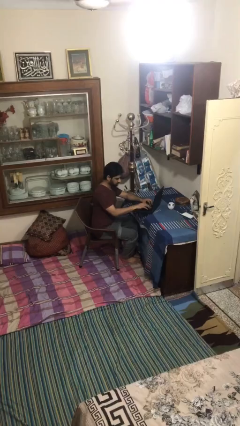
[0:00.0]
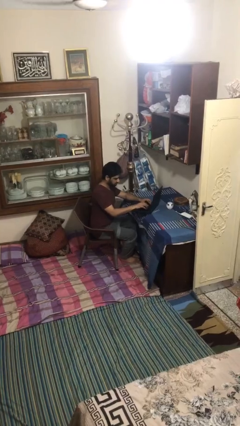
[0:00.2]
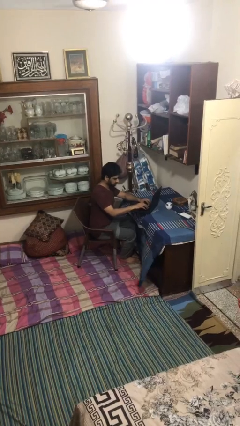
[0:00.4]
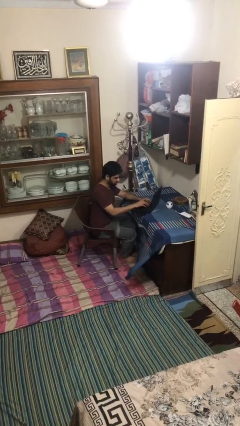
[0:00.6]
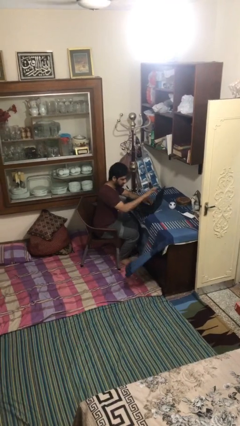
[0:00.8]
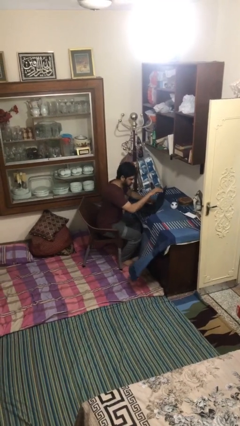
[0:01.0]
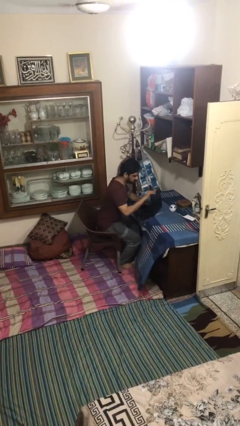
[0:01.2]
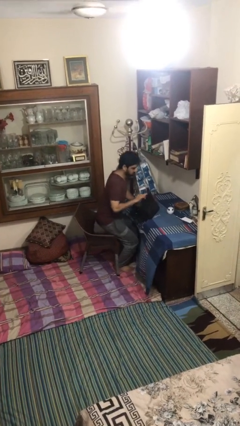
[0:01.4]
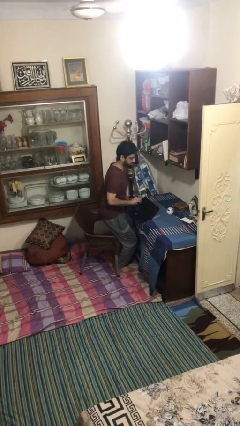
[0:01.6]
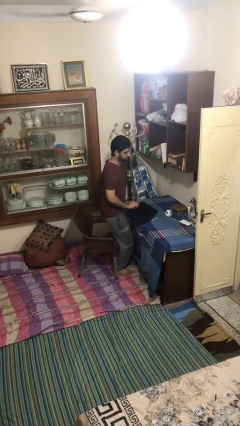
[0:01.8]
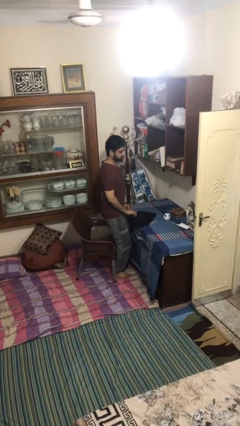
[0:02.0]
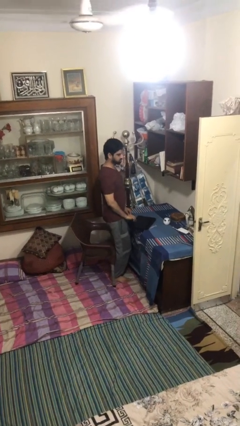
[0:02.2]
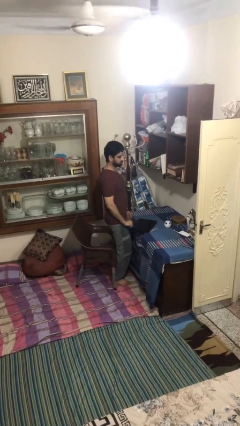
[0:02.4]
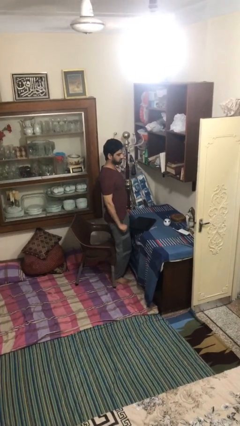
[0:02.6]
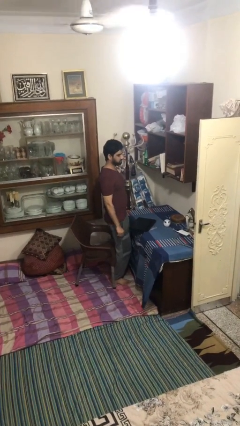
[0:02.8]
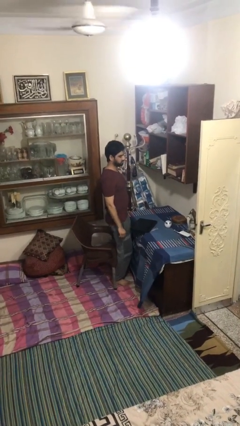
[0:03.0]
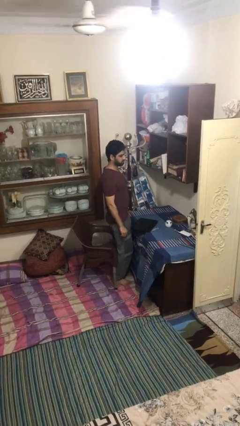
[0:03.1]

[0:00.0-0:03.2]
person stands up

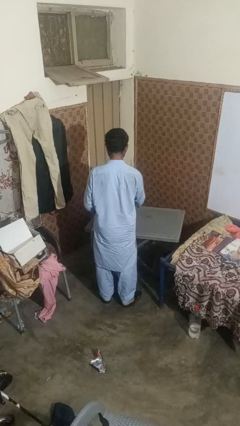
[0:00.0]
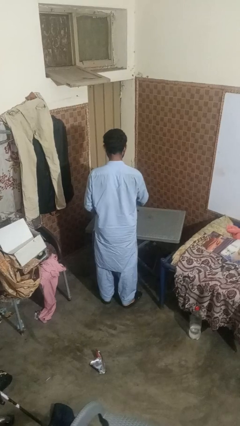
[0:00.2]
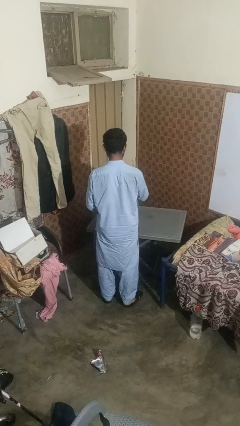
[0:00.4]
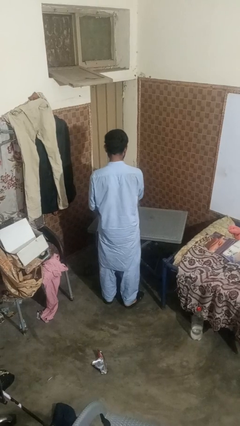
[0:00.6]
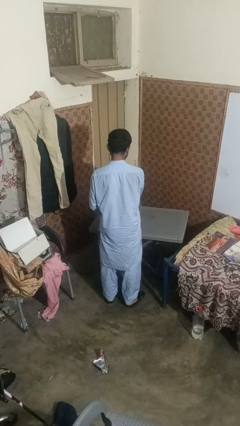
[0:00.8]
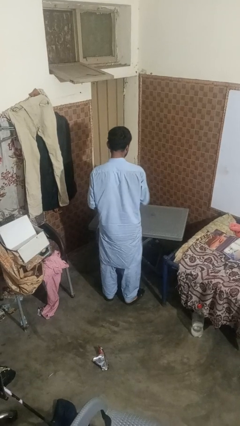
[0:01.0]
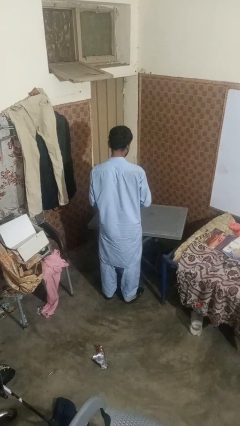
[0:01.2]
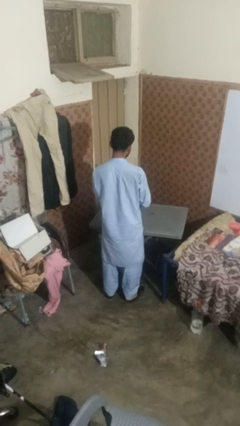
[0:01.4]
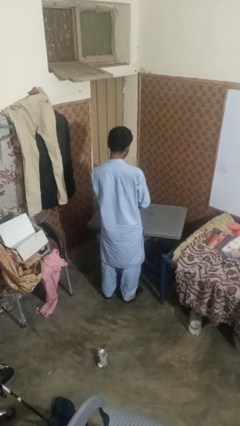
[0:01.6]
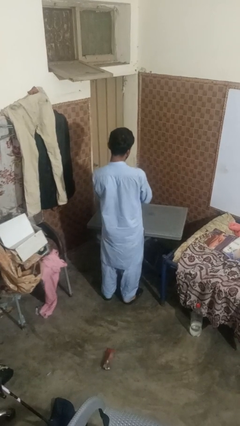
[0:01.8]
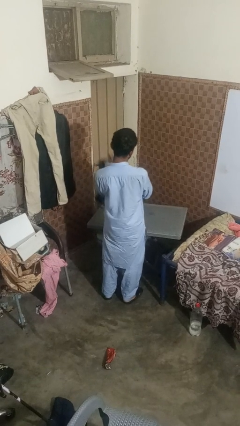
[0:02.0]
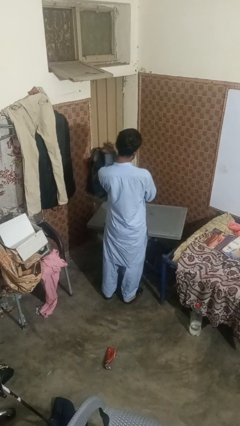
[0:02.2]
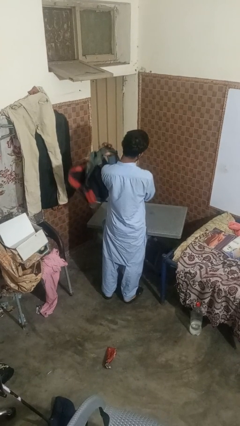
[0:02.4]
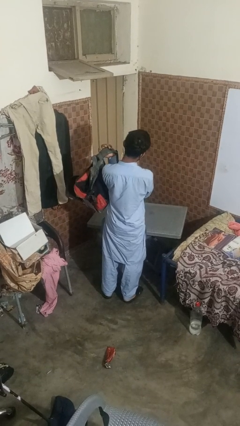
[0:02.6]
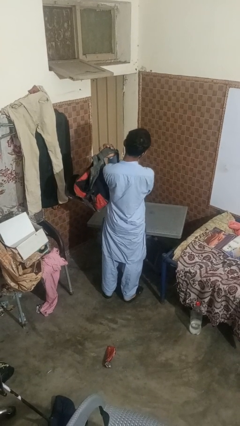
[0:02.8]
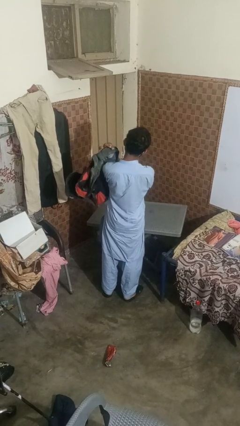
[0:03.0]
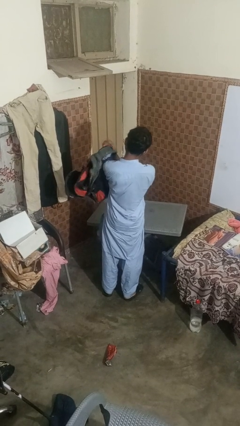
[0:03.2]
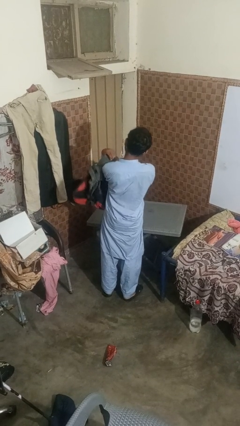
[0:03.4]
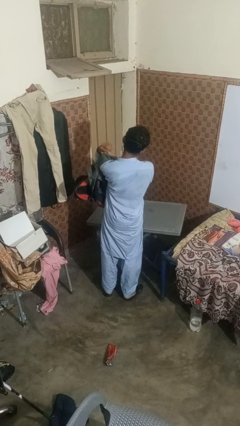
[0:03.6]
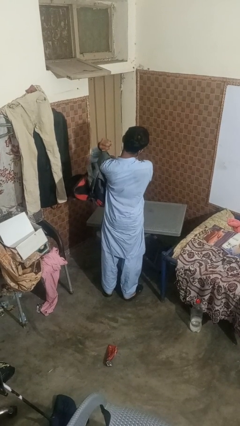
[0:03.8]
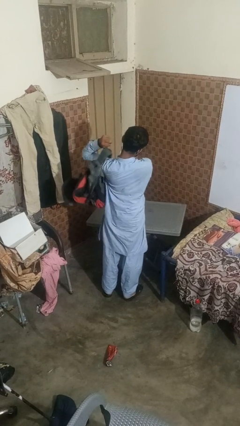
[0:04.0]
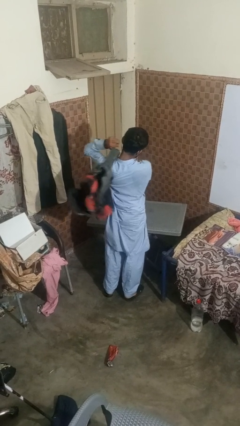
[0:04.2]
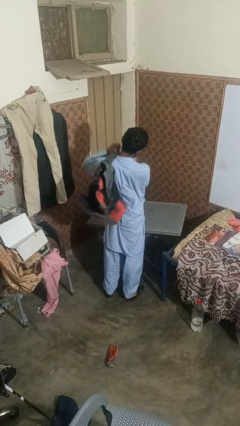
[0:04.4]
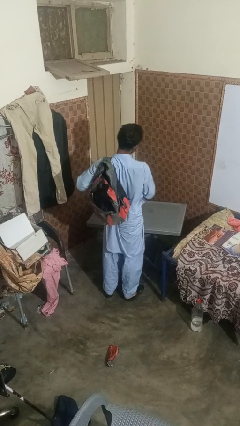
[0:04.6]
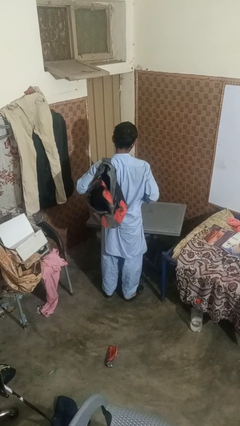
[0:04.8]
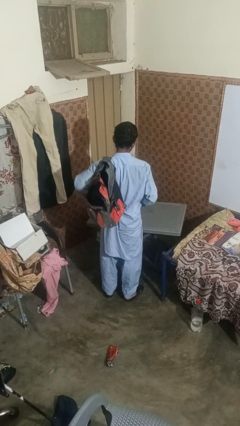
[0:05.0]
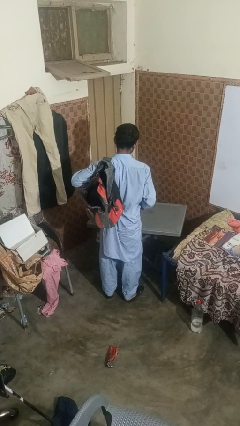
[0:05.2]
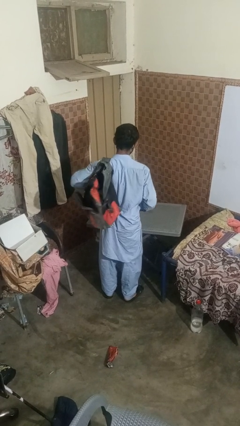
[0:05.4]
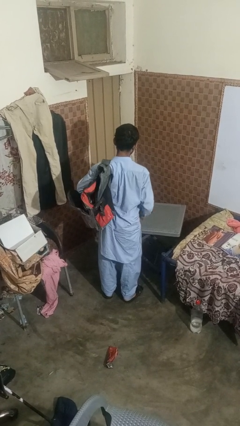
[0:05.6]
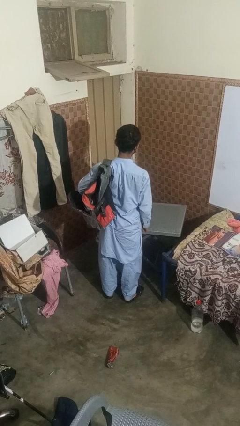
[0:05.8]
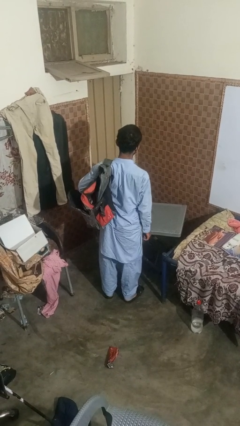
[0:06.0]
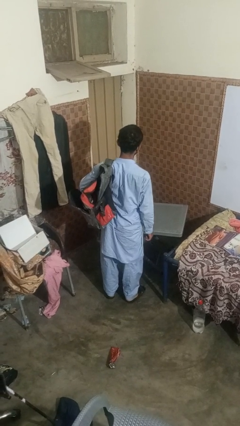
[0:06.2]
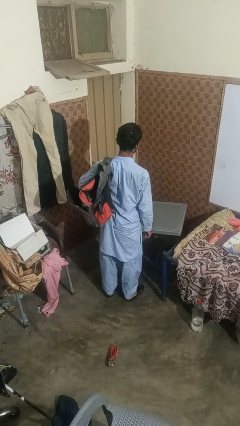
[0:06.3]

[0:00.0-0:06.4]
person puts on backpack

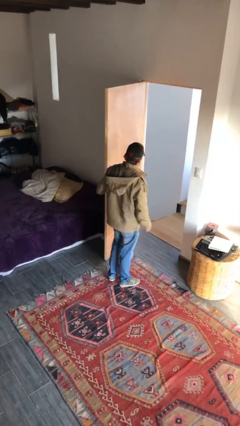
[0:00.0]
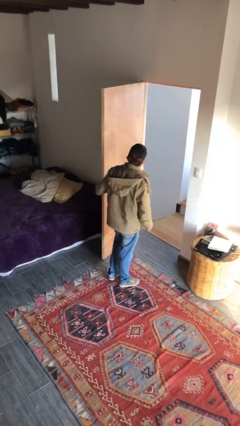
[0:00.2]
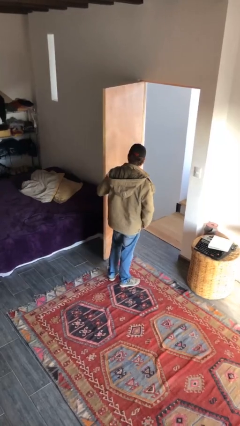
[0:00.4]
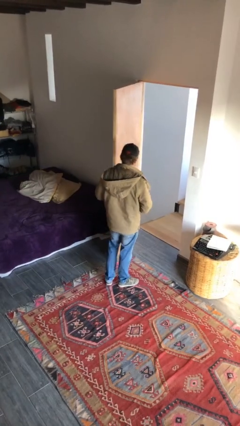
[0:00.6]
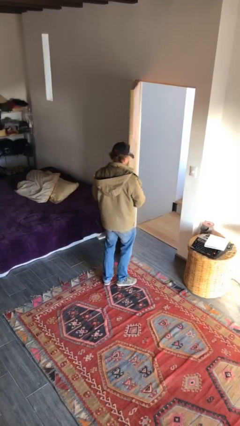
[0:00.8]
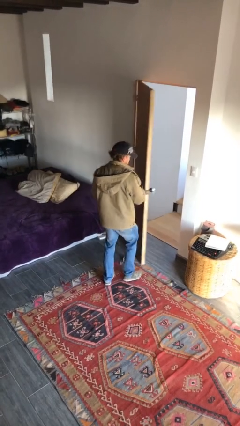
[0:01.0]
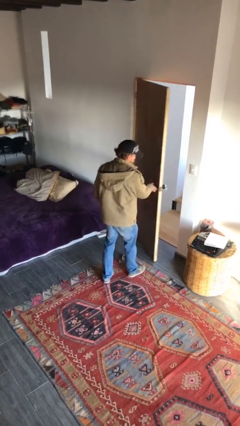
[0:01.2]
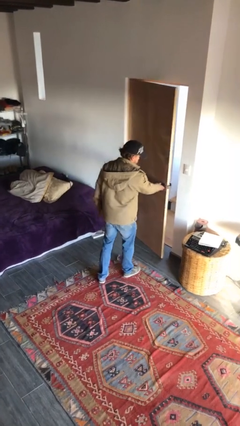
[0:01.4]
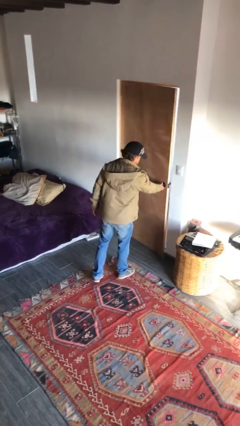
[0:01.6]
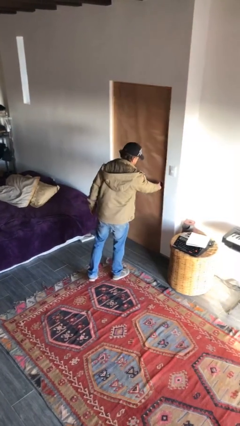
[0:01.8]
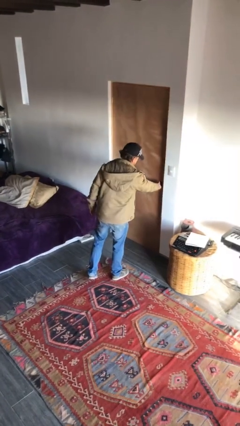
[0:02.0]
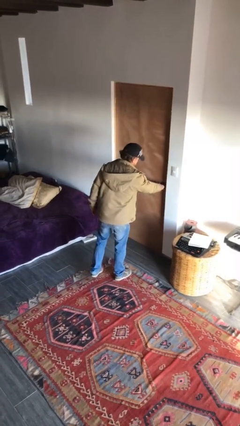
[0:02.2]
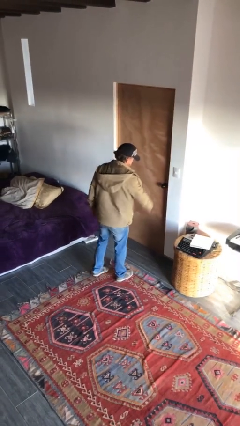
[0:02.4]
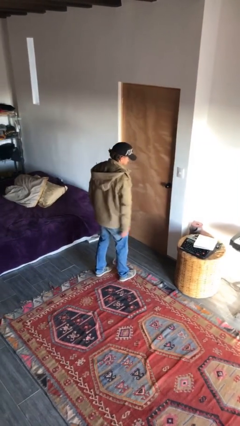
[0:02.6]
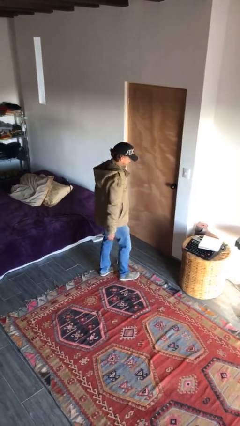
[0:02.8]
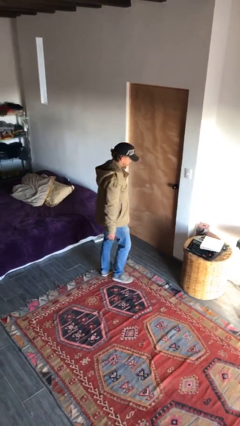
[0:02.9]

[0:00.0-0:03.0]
person closes facility door

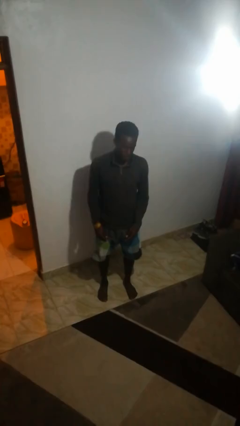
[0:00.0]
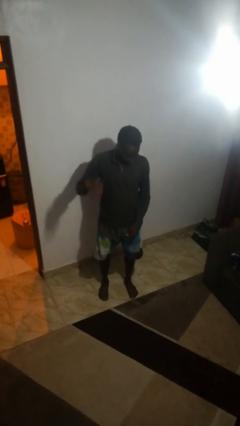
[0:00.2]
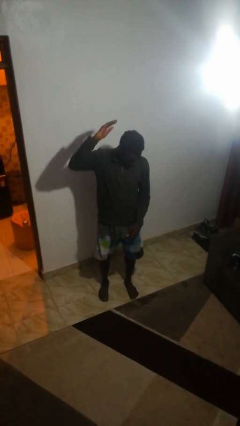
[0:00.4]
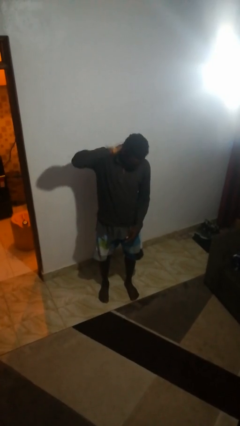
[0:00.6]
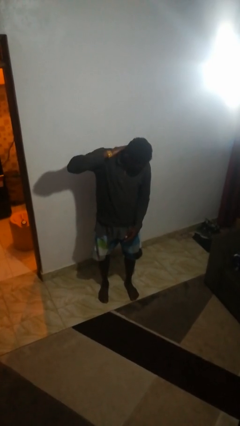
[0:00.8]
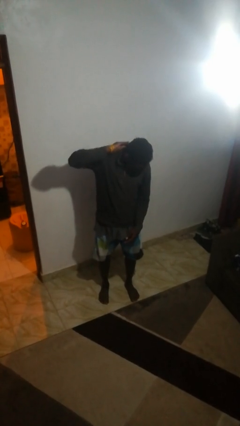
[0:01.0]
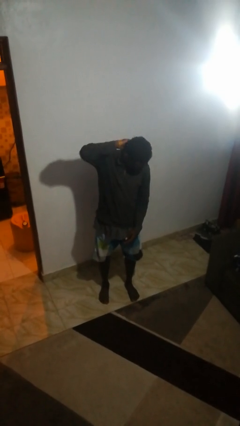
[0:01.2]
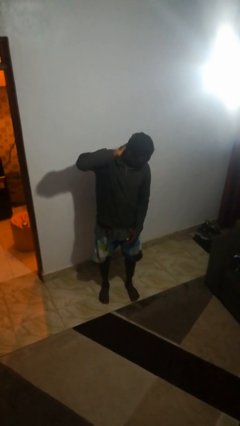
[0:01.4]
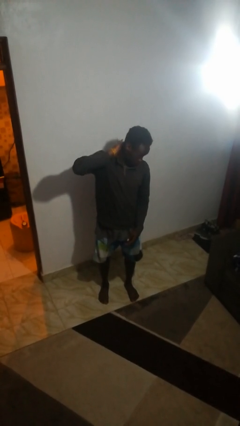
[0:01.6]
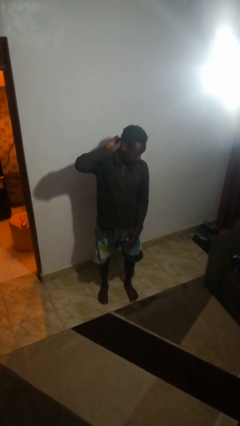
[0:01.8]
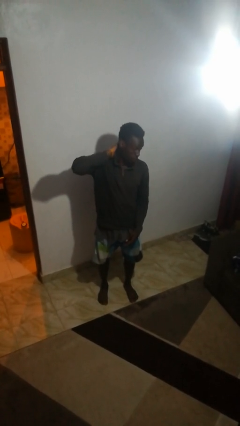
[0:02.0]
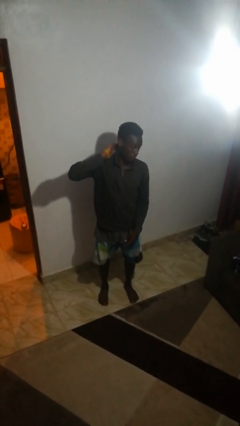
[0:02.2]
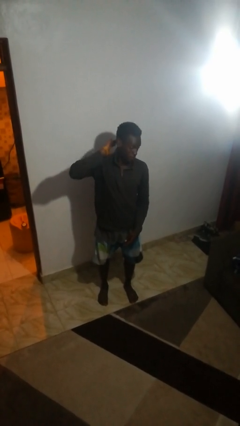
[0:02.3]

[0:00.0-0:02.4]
person swats bug

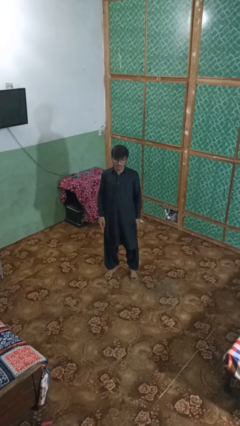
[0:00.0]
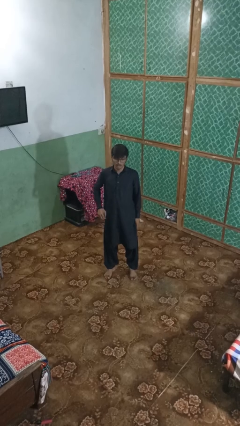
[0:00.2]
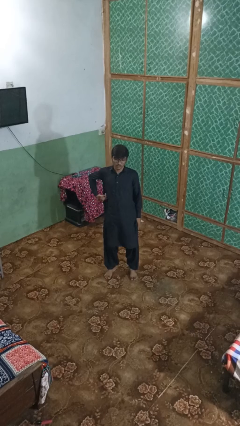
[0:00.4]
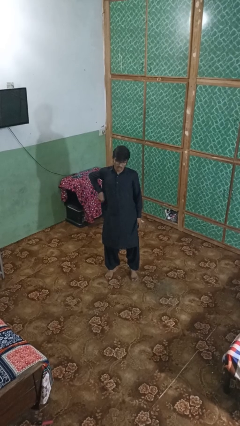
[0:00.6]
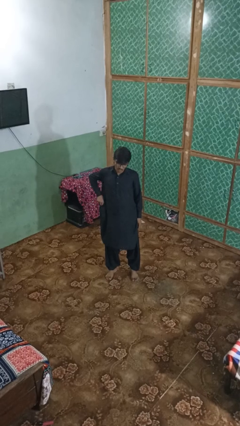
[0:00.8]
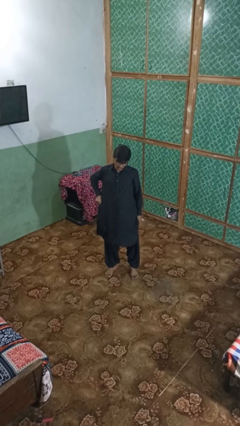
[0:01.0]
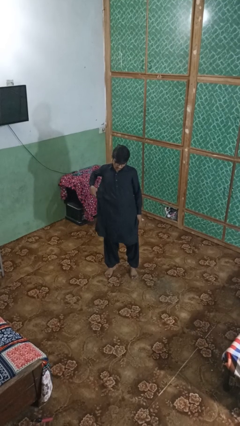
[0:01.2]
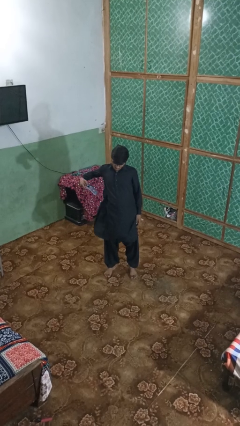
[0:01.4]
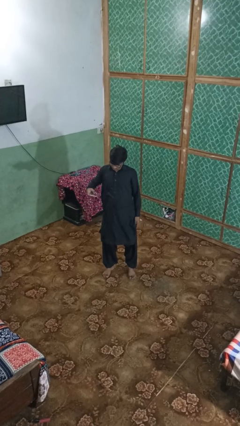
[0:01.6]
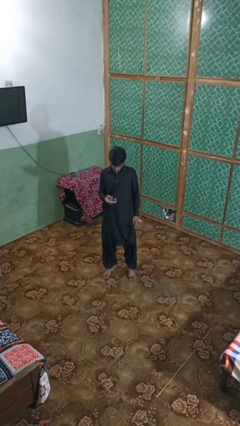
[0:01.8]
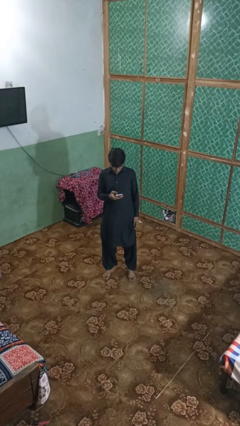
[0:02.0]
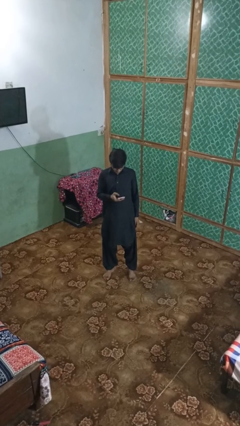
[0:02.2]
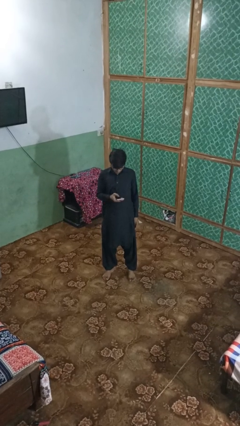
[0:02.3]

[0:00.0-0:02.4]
person takes phone from pocket
